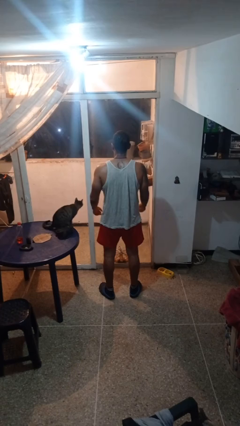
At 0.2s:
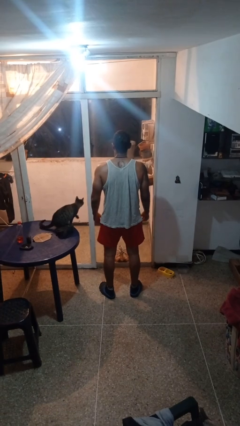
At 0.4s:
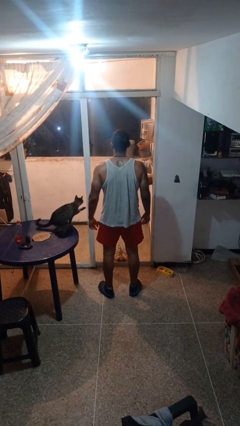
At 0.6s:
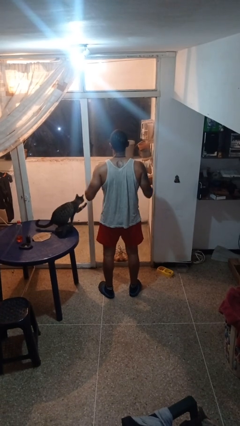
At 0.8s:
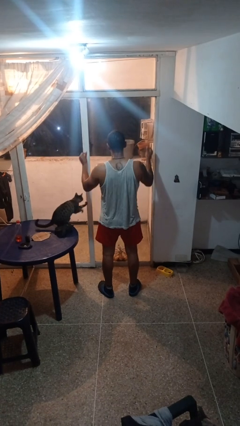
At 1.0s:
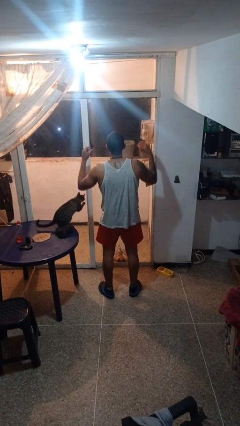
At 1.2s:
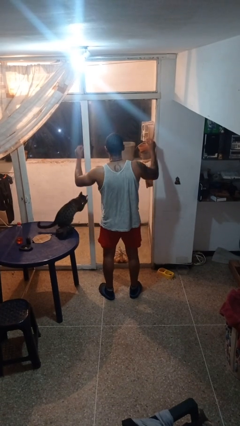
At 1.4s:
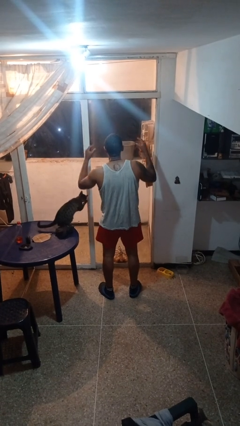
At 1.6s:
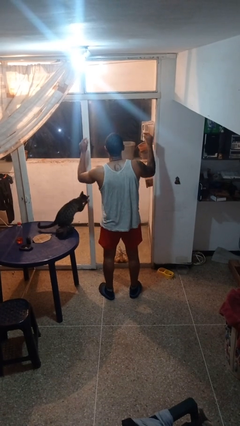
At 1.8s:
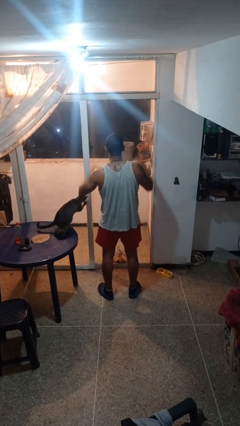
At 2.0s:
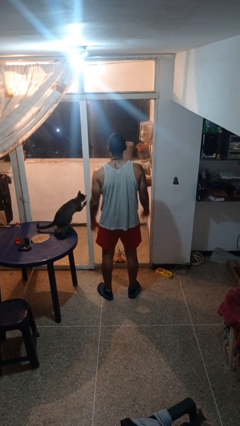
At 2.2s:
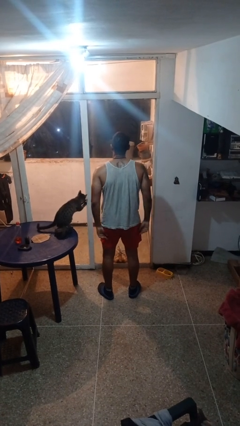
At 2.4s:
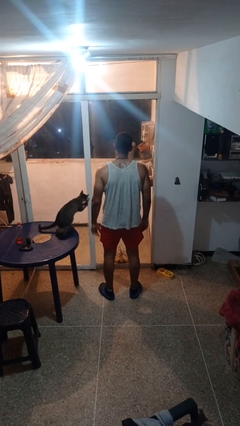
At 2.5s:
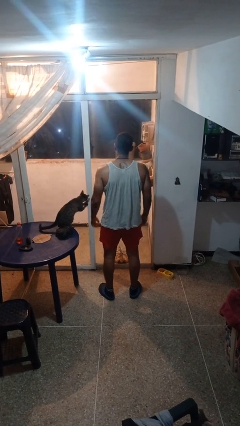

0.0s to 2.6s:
person snaps fingers

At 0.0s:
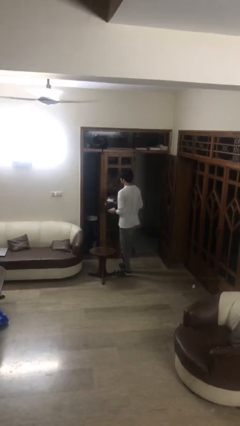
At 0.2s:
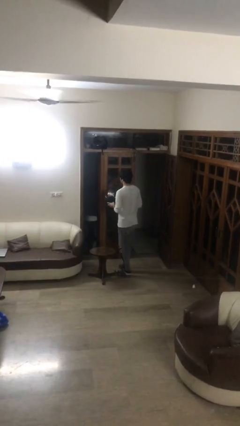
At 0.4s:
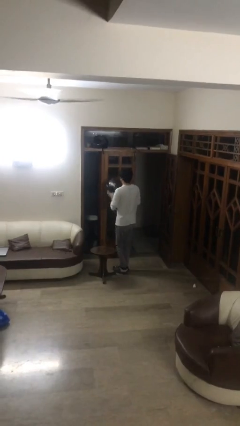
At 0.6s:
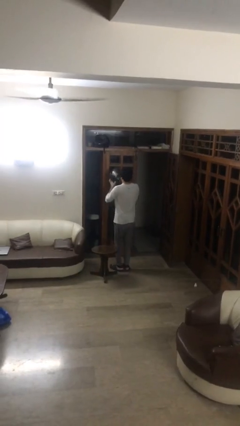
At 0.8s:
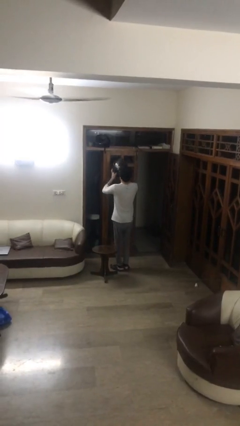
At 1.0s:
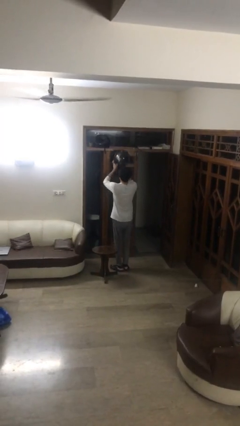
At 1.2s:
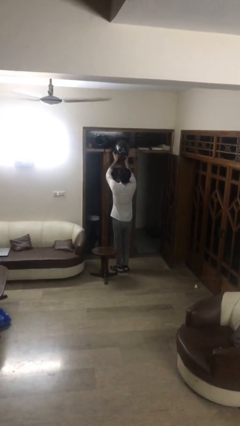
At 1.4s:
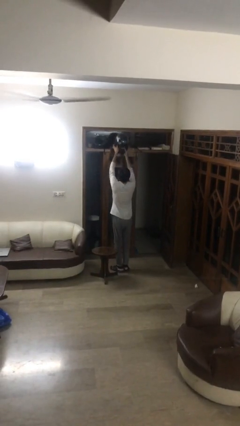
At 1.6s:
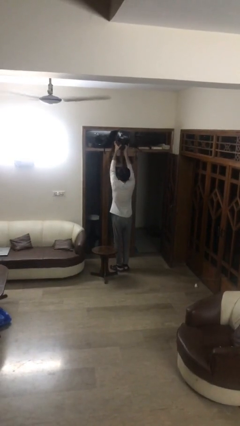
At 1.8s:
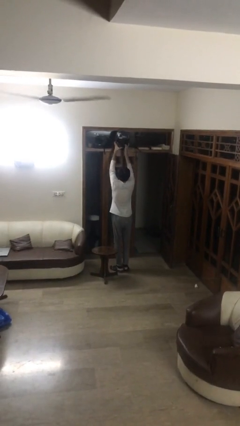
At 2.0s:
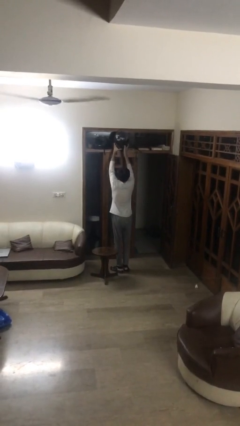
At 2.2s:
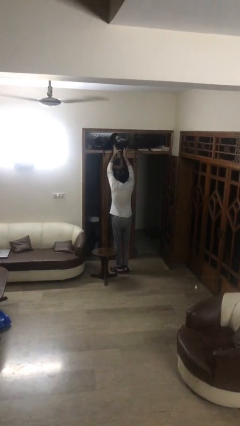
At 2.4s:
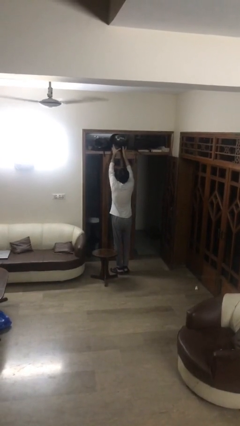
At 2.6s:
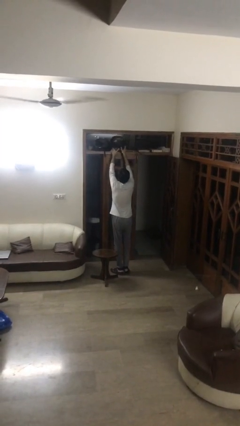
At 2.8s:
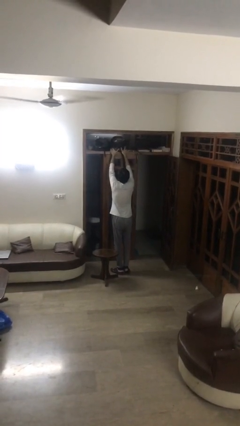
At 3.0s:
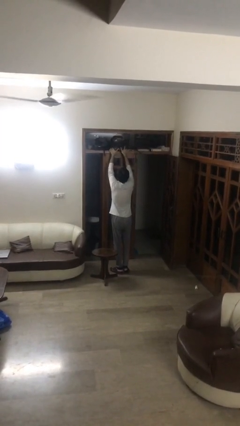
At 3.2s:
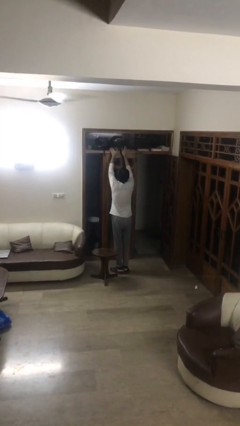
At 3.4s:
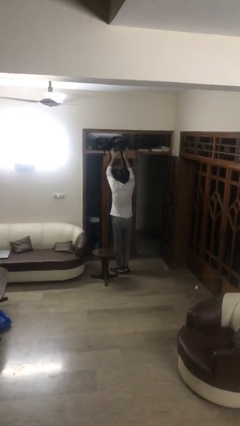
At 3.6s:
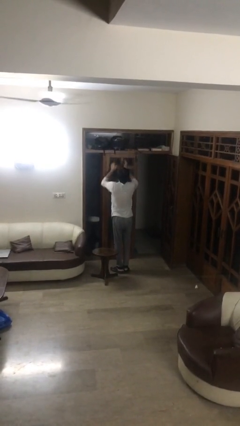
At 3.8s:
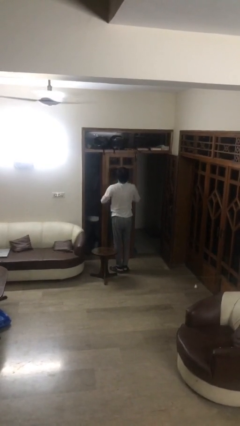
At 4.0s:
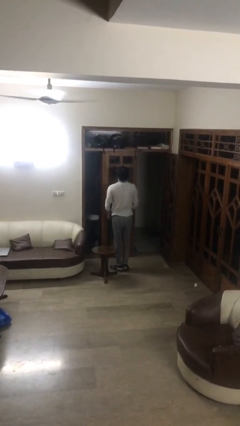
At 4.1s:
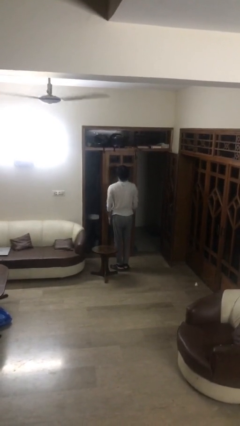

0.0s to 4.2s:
person puts down object on shelf

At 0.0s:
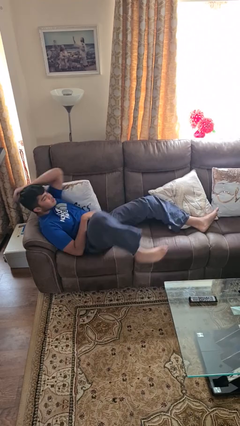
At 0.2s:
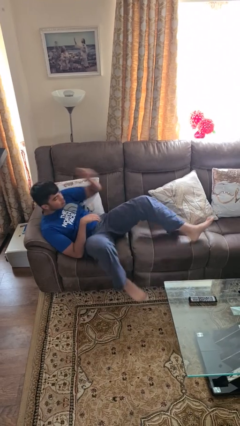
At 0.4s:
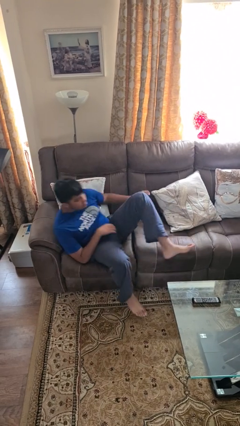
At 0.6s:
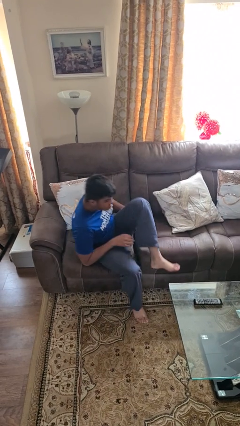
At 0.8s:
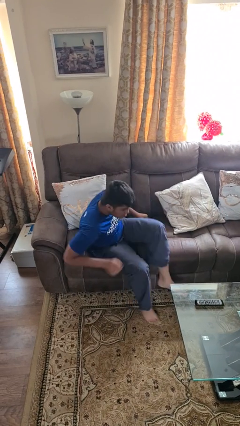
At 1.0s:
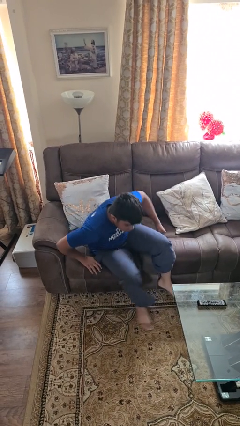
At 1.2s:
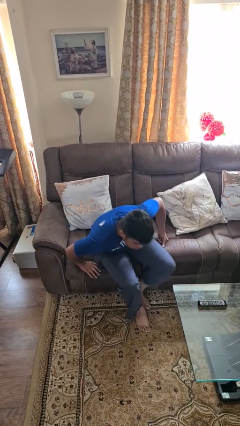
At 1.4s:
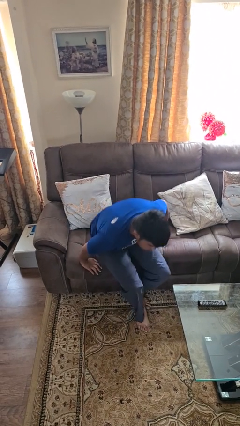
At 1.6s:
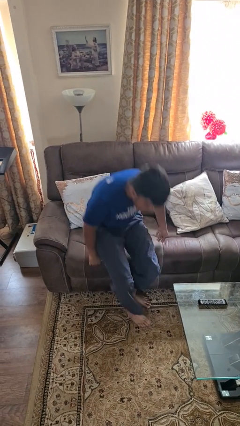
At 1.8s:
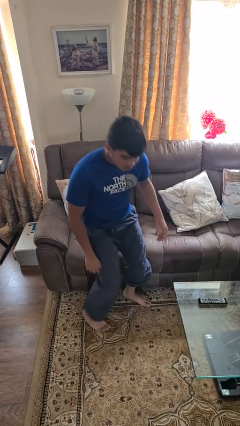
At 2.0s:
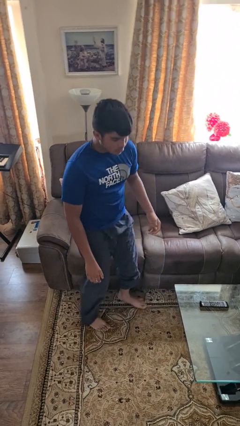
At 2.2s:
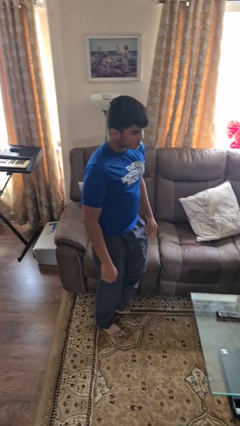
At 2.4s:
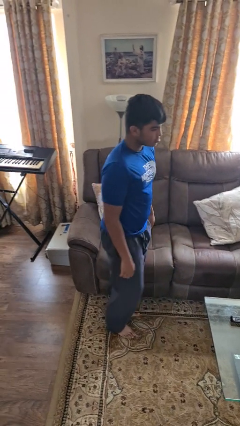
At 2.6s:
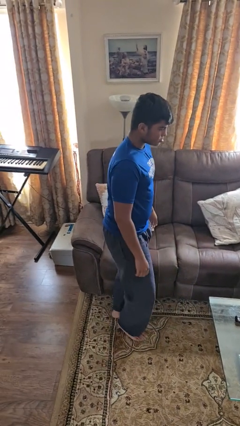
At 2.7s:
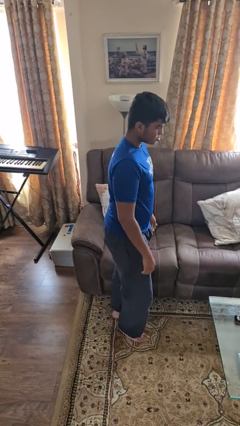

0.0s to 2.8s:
person stands up

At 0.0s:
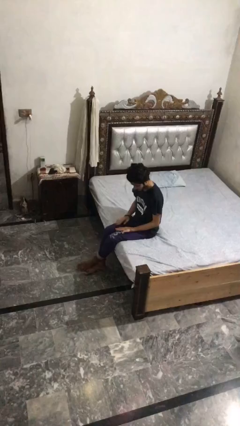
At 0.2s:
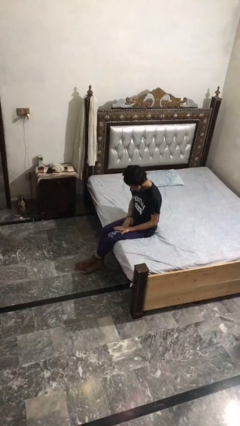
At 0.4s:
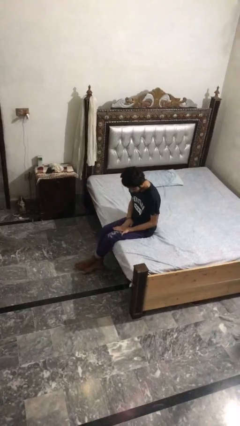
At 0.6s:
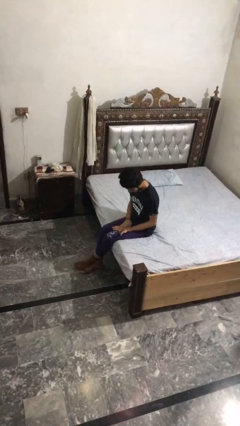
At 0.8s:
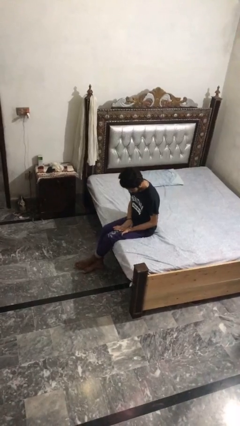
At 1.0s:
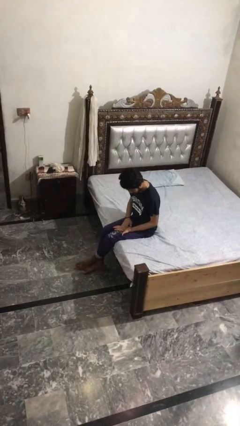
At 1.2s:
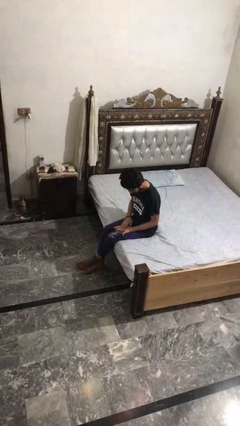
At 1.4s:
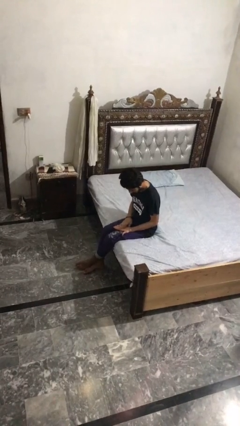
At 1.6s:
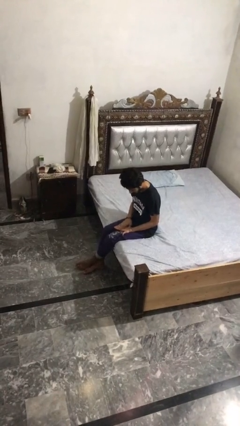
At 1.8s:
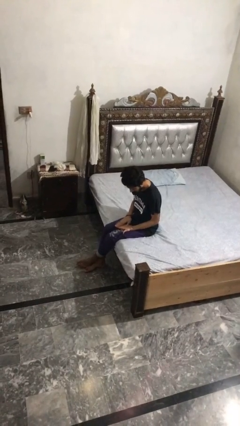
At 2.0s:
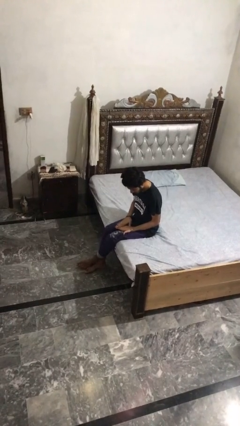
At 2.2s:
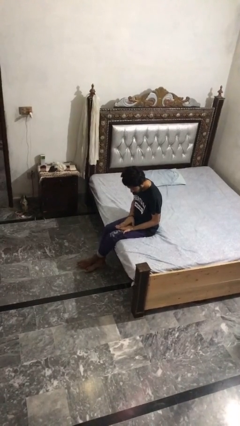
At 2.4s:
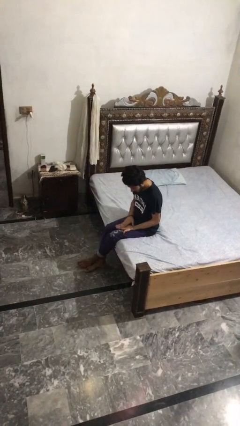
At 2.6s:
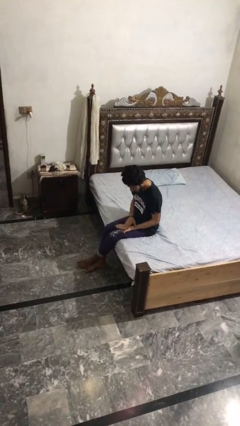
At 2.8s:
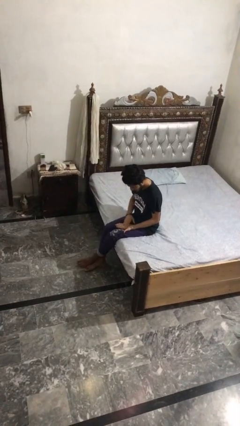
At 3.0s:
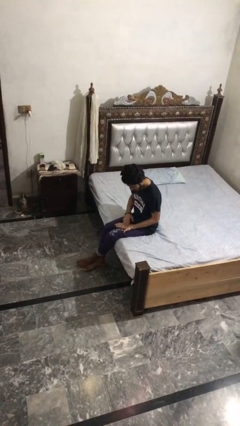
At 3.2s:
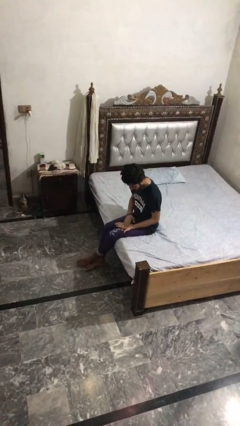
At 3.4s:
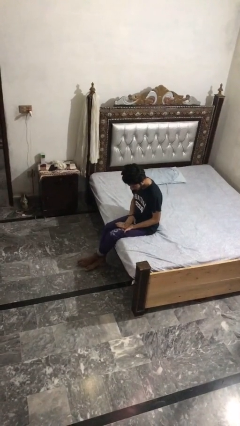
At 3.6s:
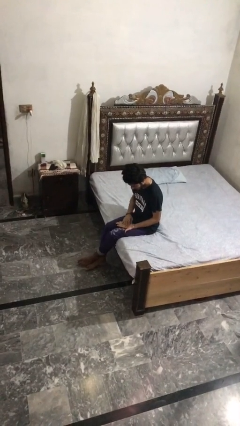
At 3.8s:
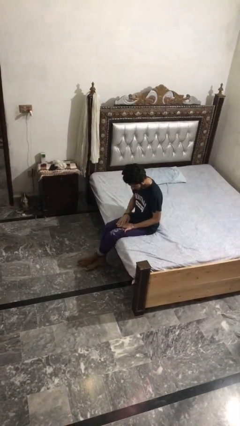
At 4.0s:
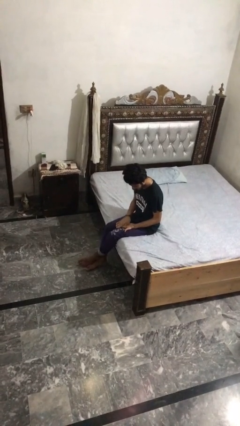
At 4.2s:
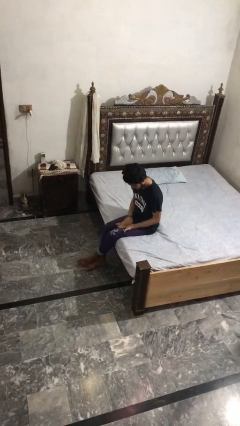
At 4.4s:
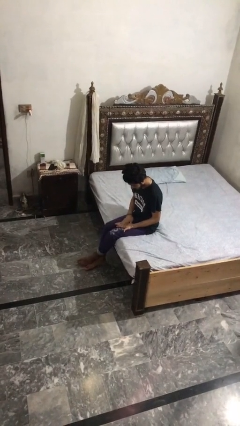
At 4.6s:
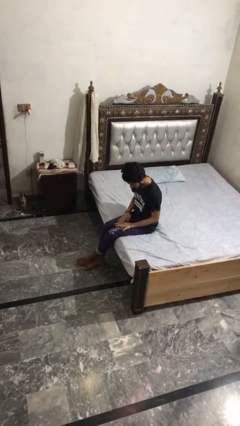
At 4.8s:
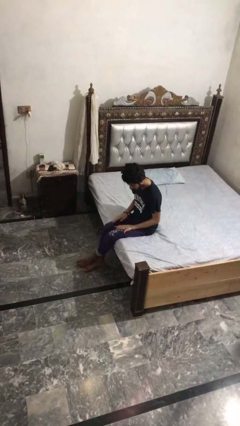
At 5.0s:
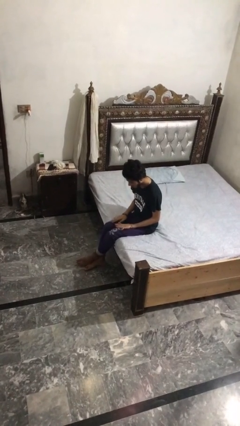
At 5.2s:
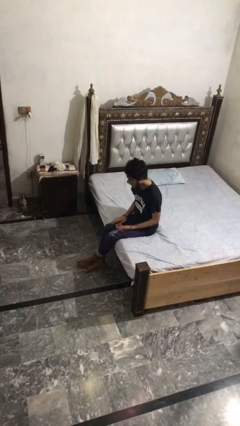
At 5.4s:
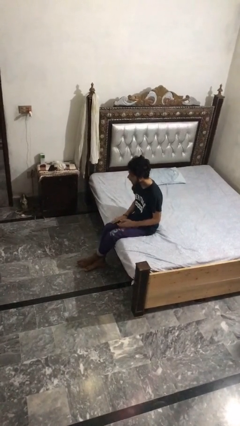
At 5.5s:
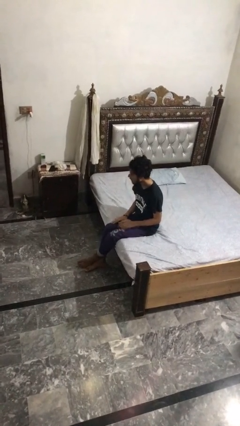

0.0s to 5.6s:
person looks at hands in lap

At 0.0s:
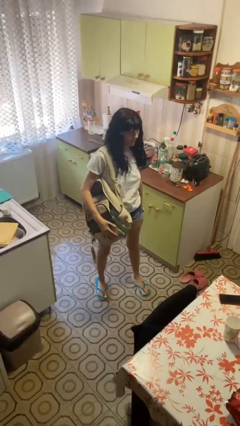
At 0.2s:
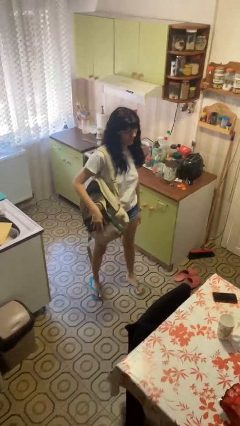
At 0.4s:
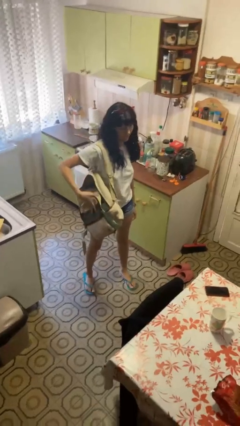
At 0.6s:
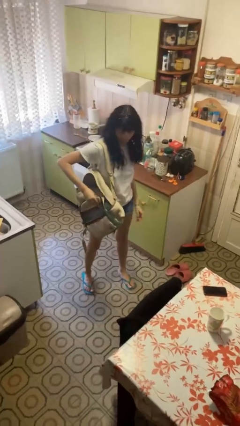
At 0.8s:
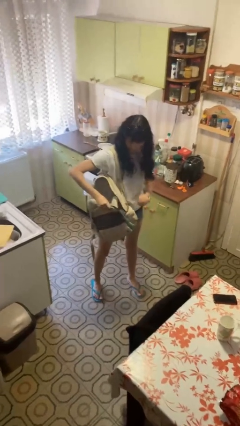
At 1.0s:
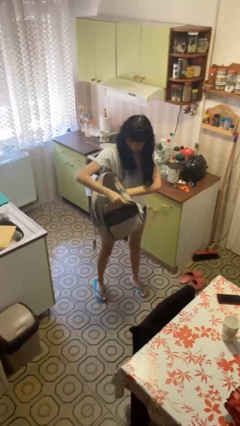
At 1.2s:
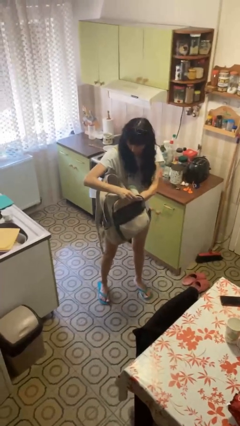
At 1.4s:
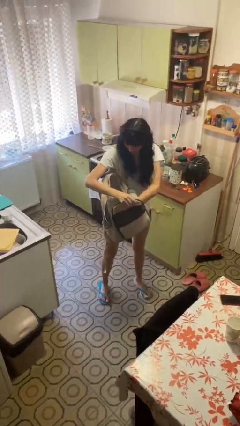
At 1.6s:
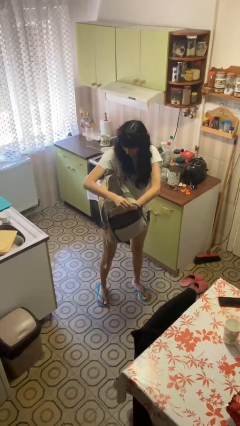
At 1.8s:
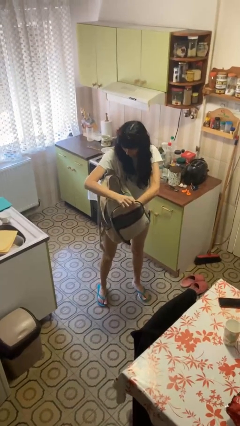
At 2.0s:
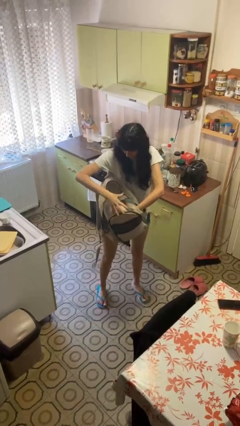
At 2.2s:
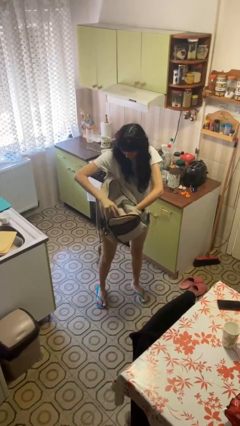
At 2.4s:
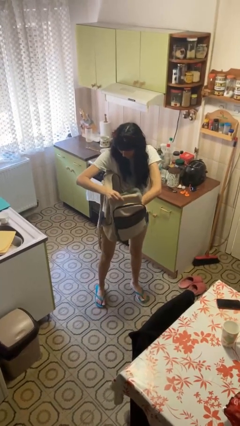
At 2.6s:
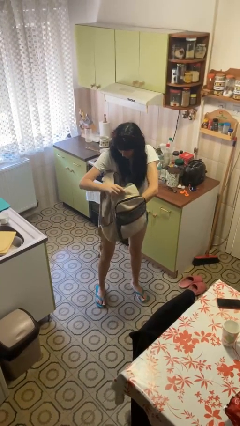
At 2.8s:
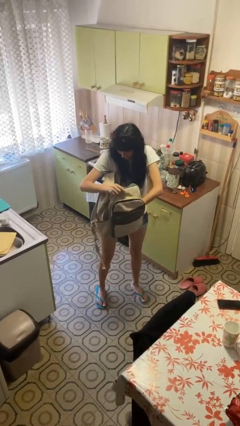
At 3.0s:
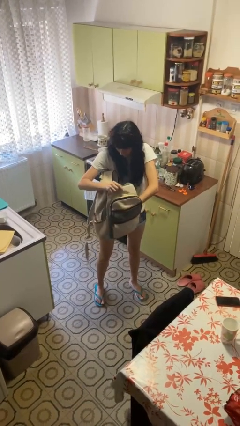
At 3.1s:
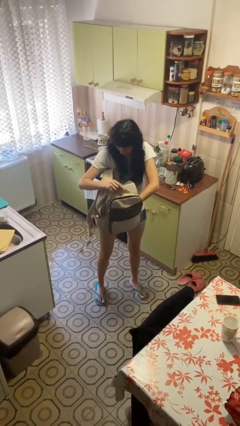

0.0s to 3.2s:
person searches in backpack
